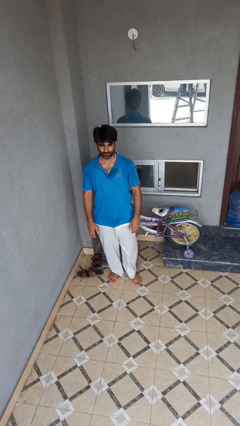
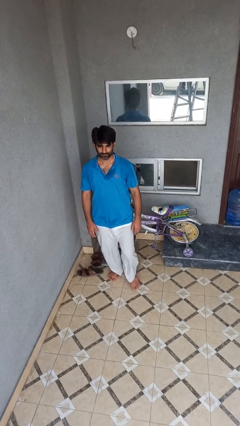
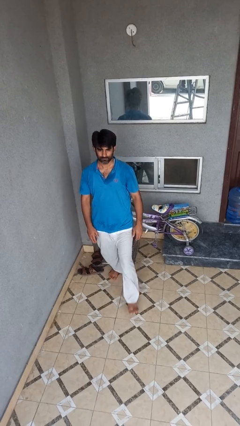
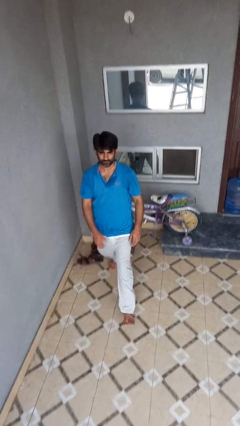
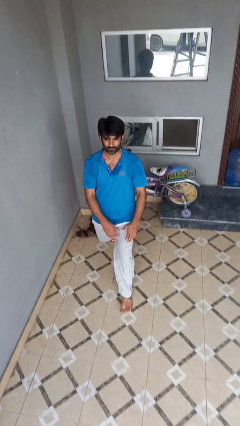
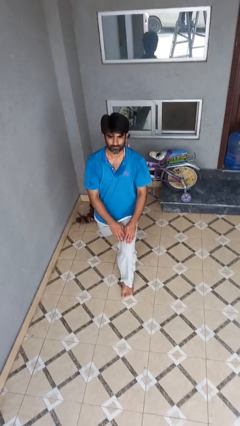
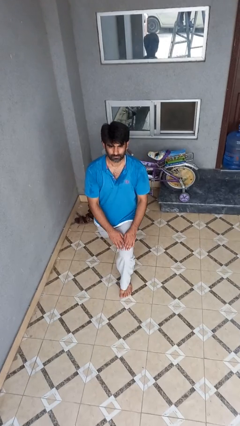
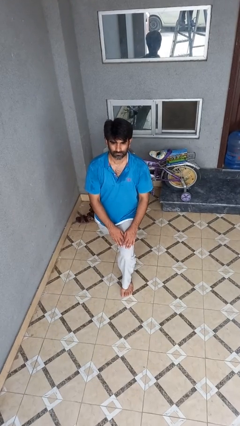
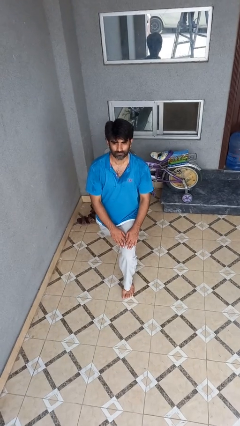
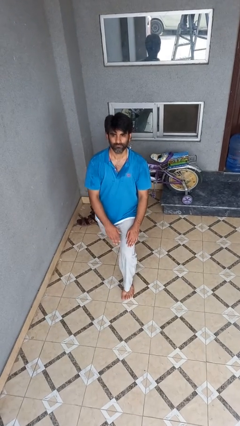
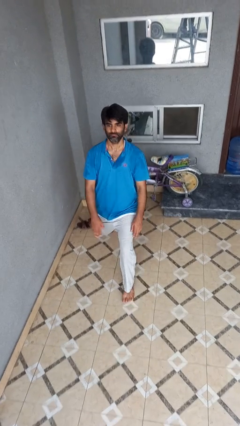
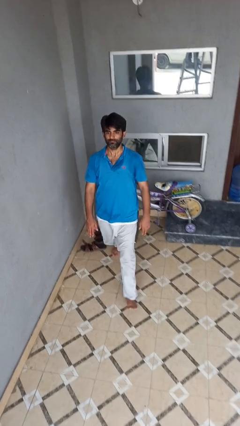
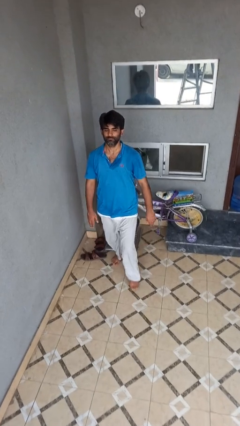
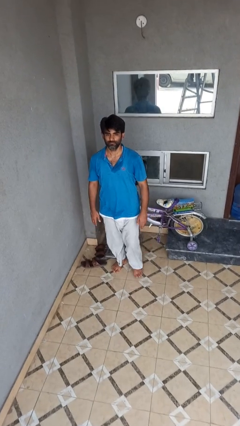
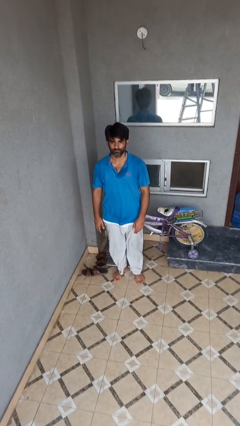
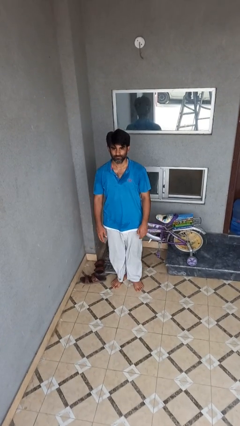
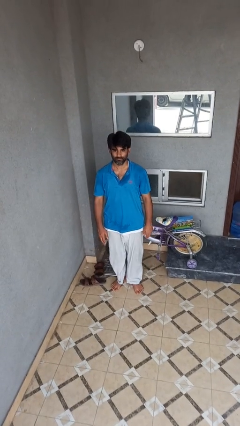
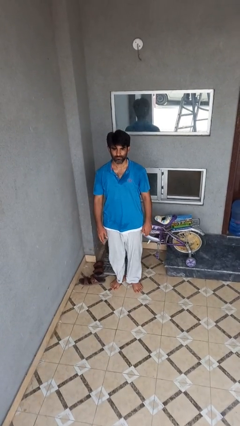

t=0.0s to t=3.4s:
person exercises with lunges

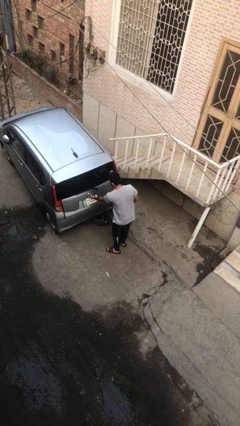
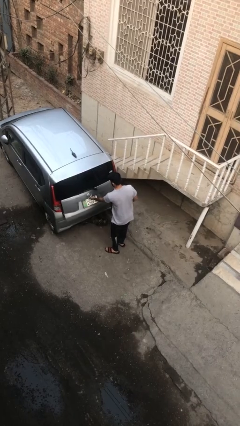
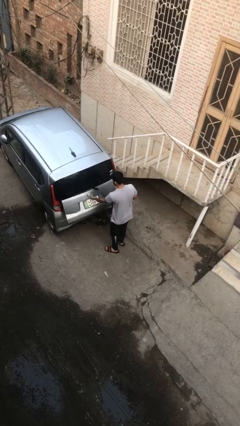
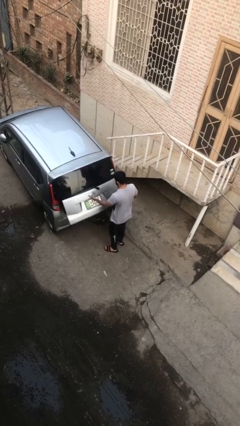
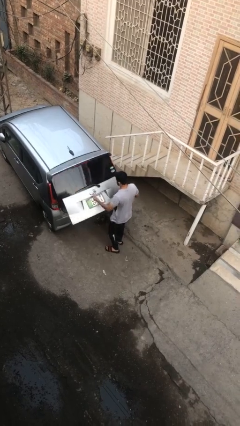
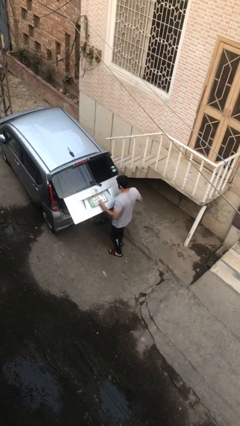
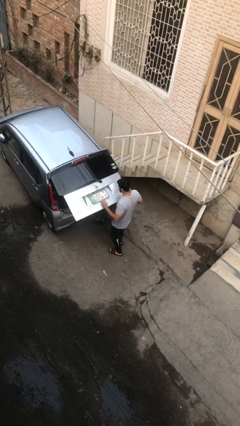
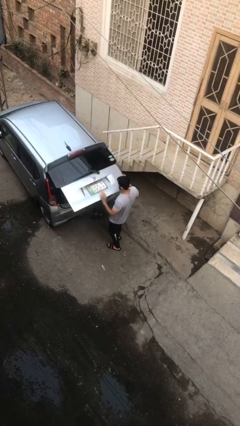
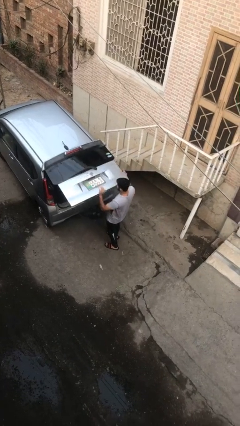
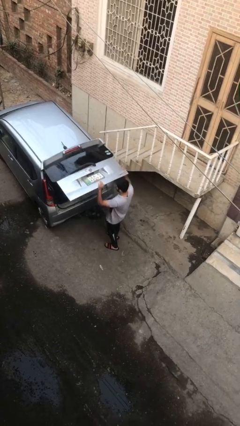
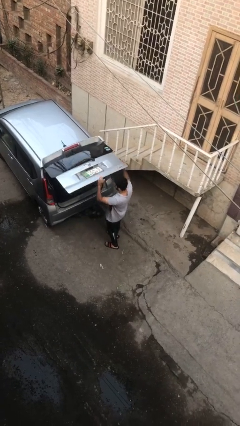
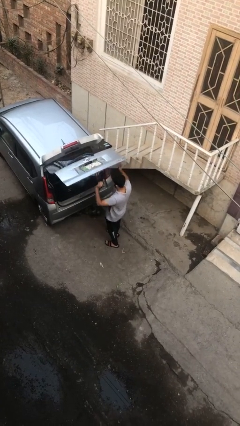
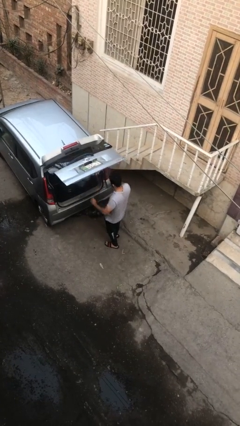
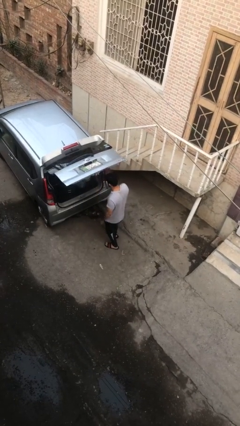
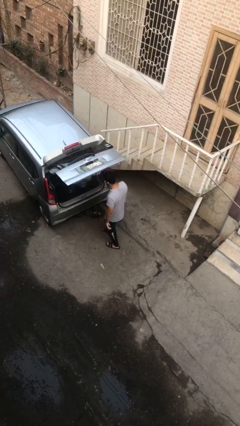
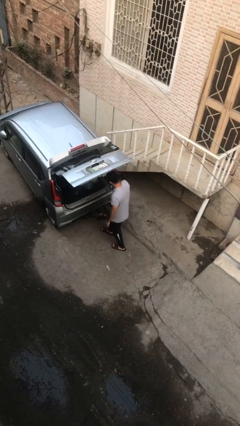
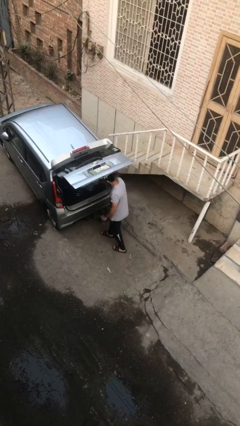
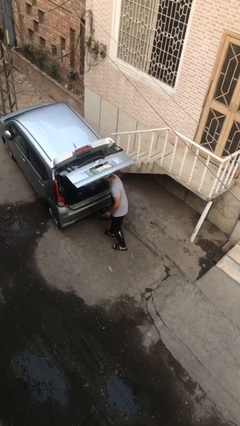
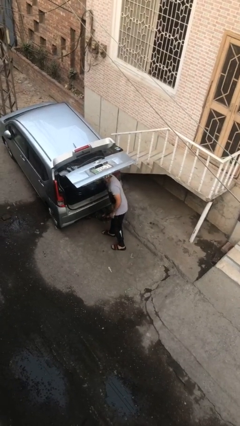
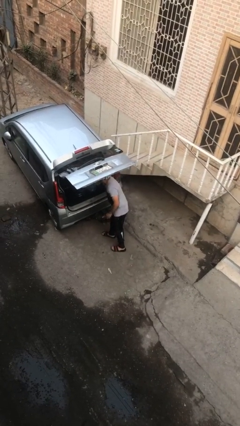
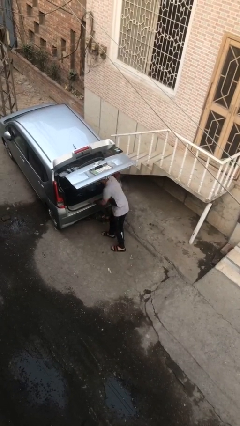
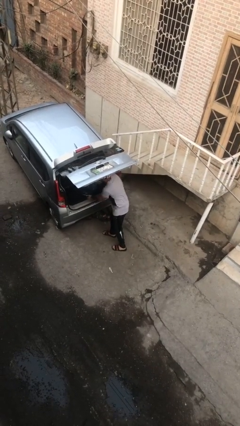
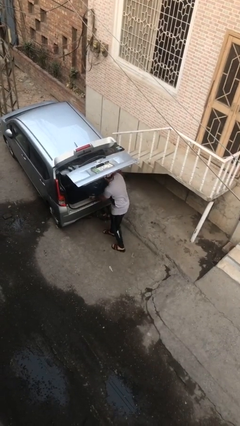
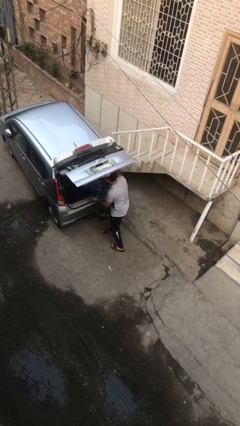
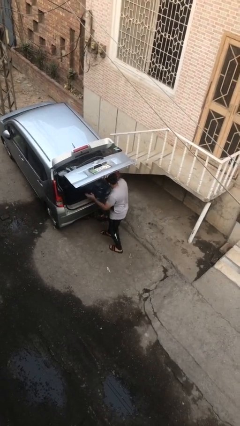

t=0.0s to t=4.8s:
person opens car trunk

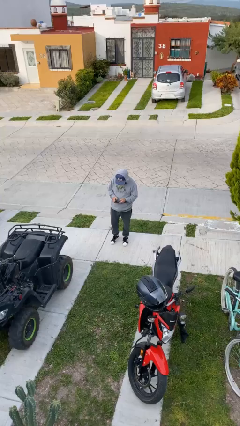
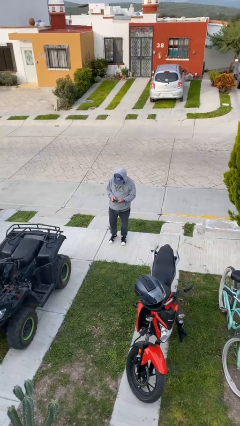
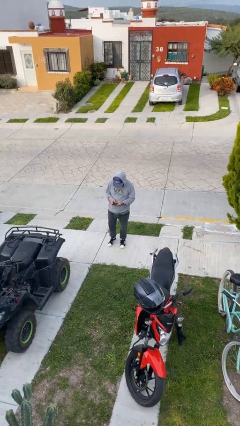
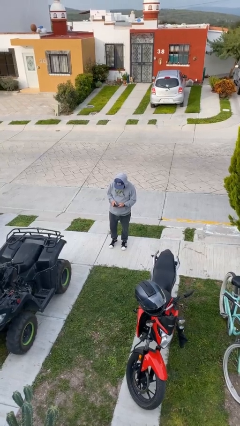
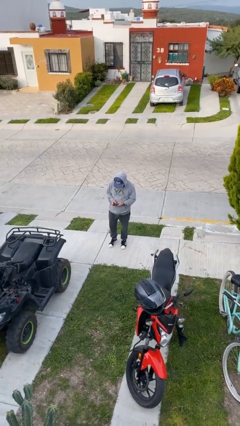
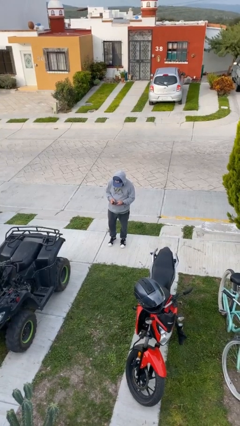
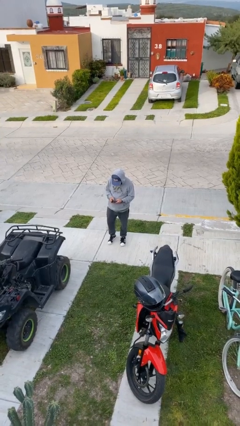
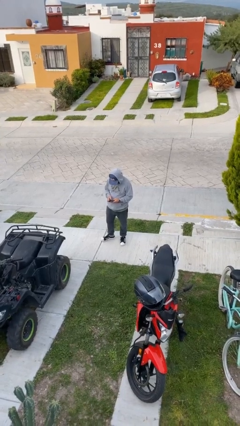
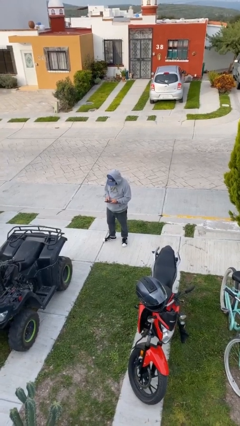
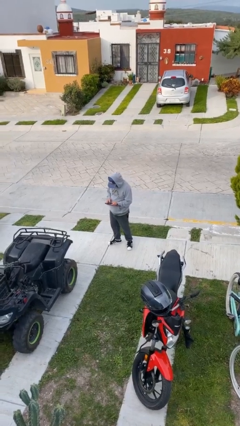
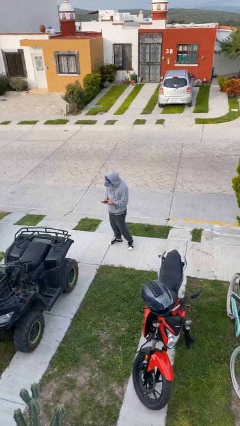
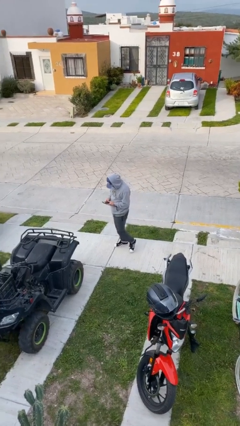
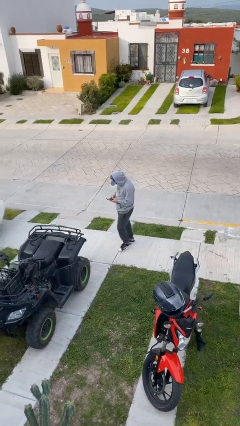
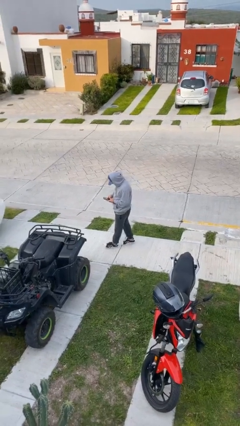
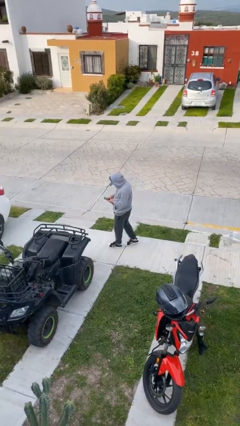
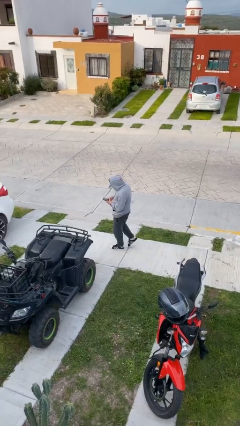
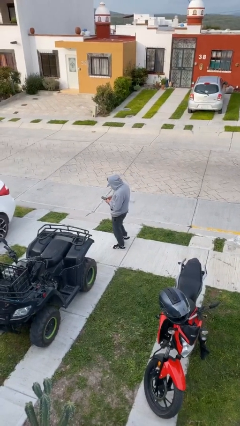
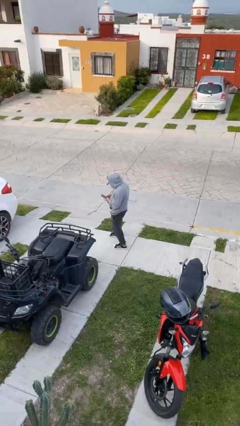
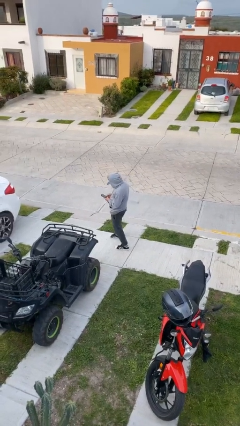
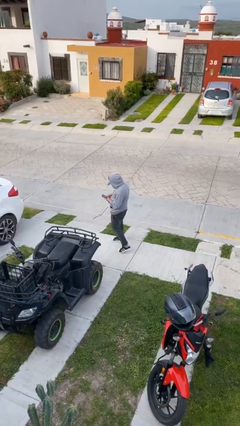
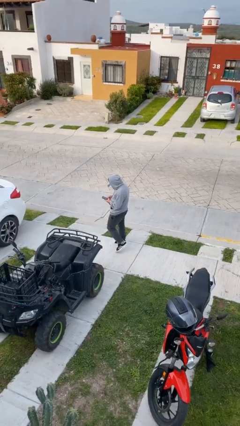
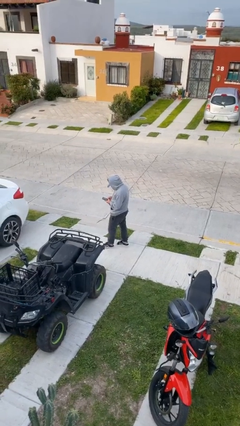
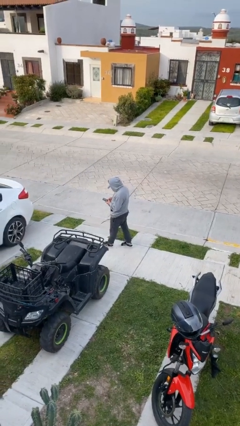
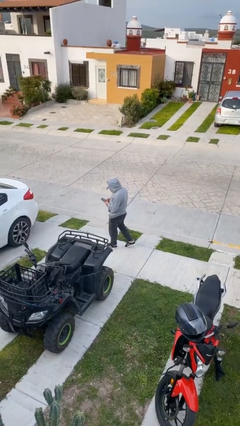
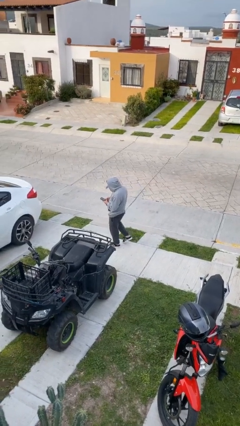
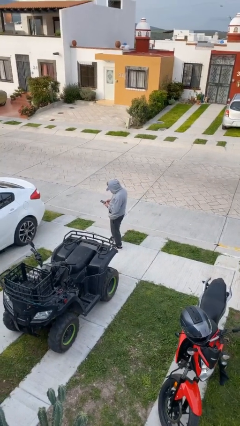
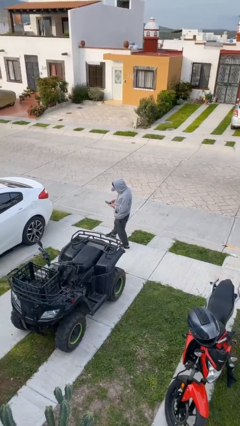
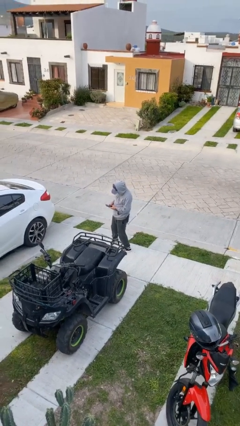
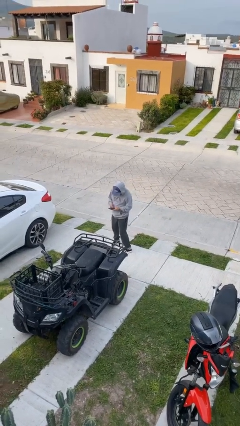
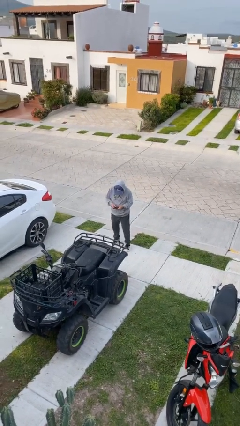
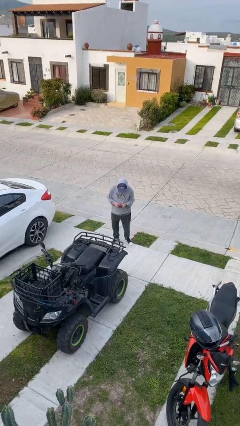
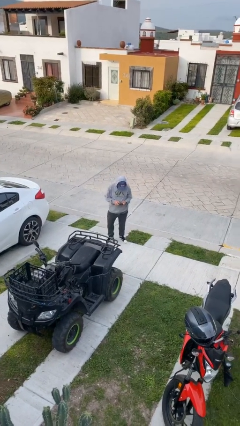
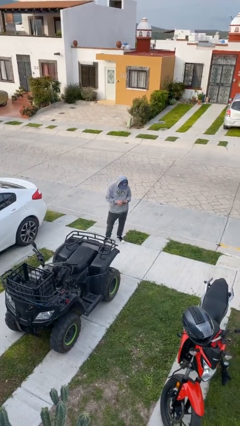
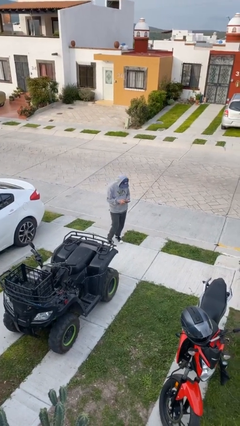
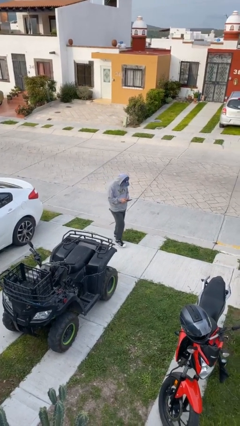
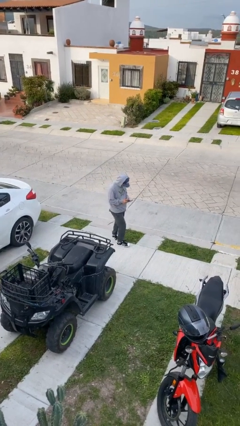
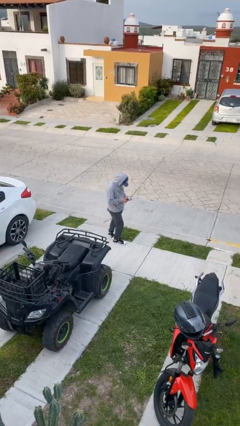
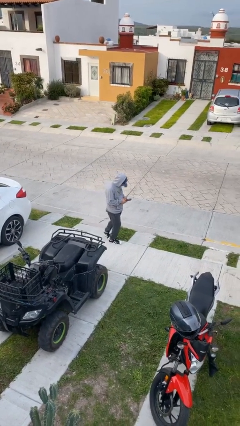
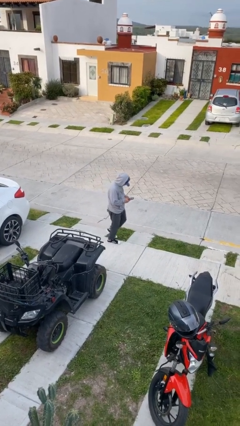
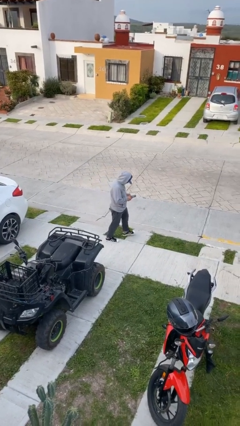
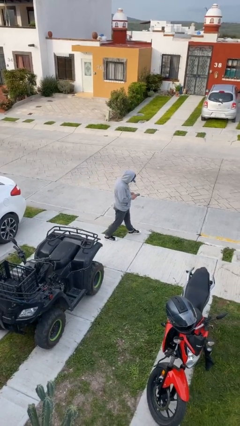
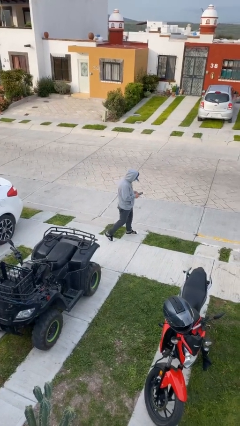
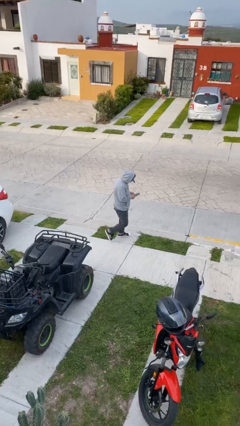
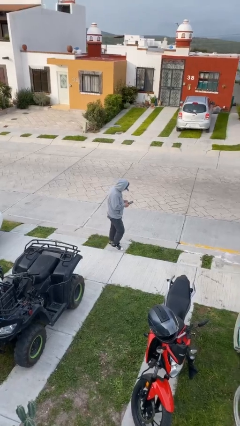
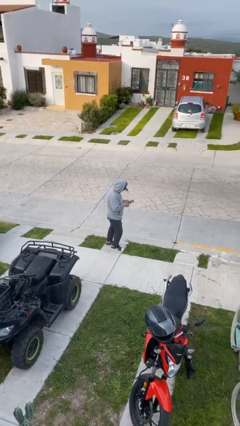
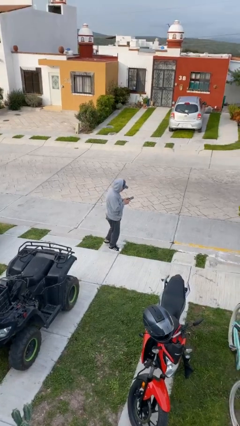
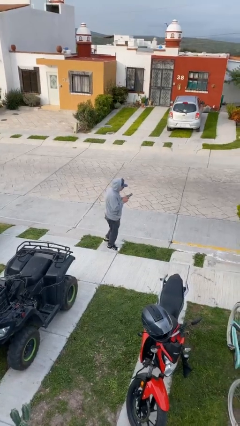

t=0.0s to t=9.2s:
person texts on phone

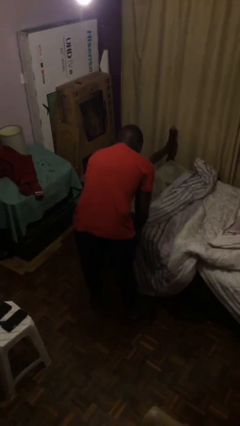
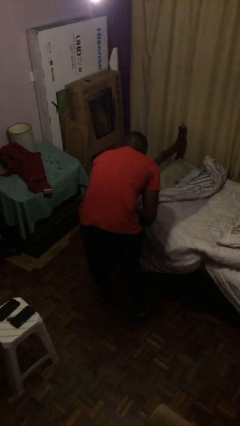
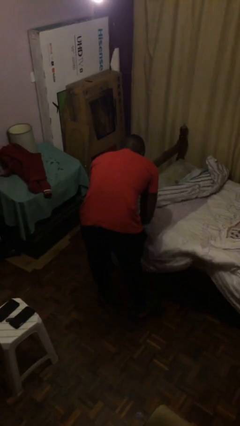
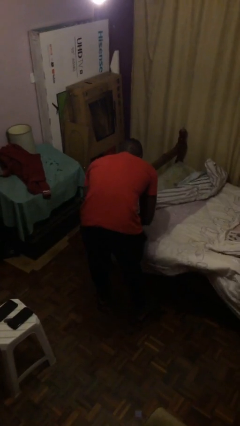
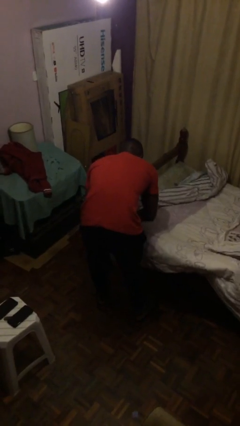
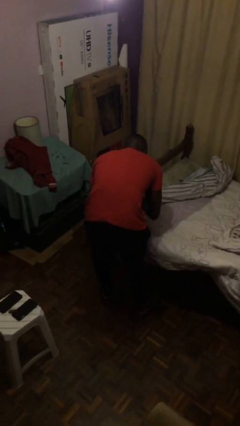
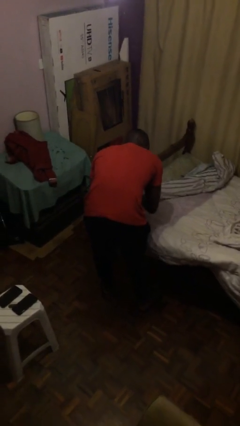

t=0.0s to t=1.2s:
person makes bed
